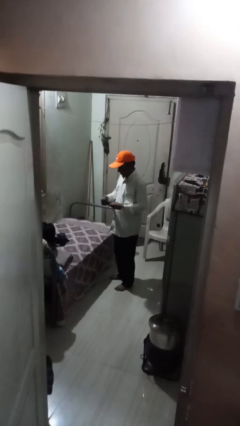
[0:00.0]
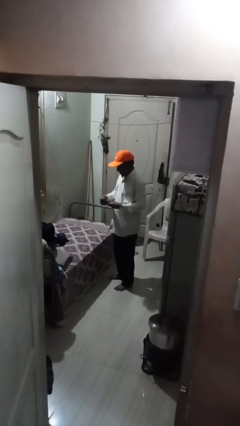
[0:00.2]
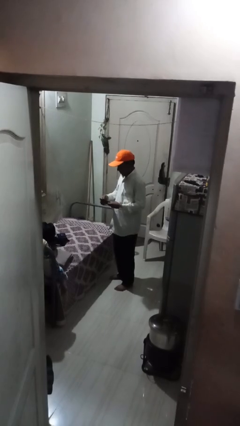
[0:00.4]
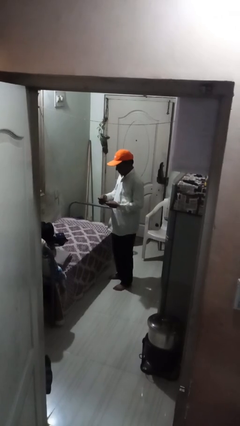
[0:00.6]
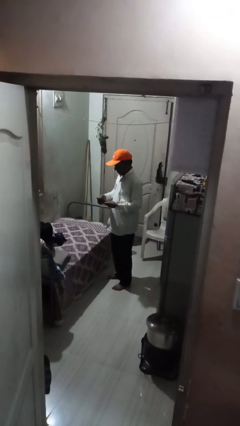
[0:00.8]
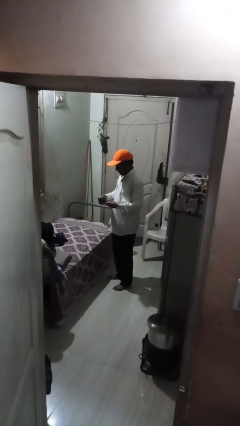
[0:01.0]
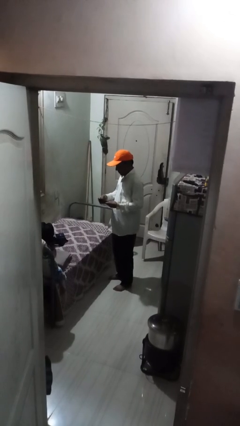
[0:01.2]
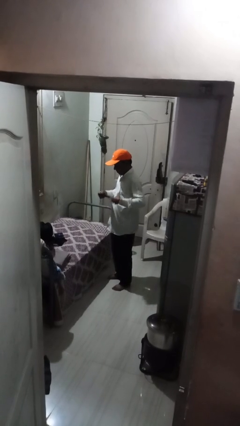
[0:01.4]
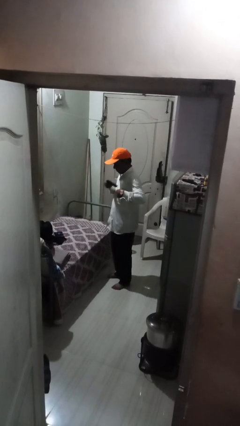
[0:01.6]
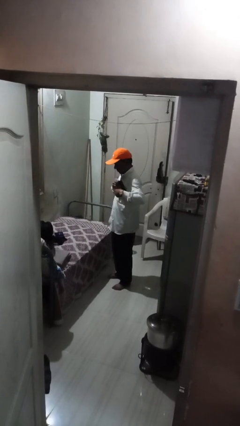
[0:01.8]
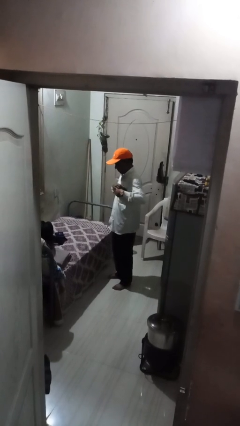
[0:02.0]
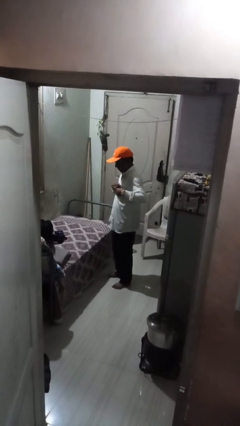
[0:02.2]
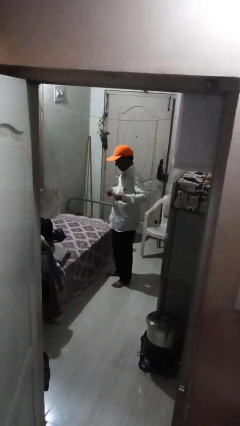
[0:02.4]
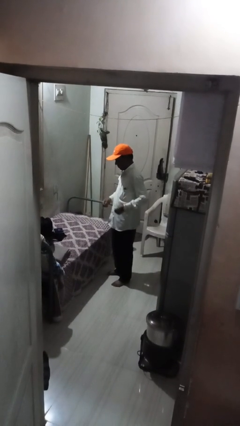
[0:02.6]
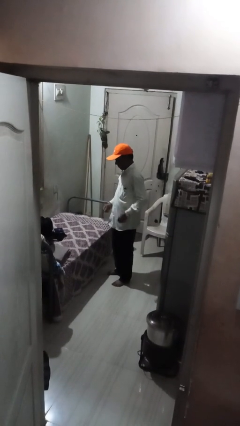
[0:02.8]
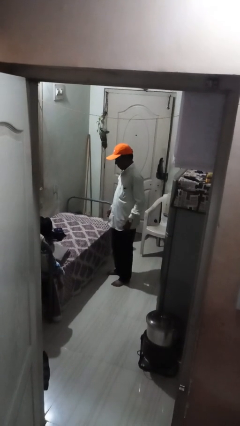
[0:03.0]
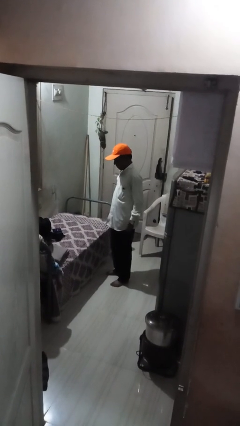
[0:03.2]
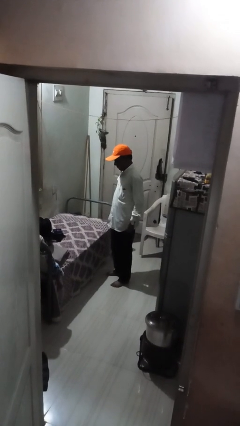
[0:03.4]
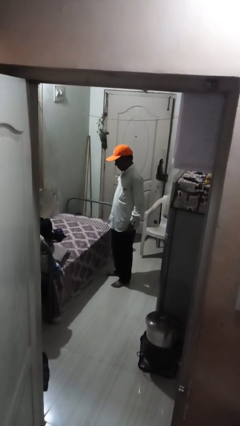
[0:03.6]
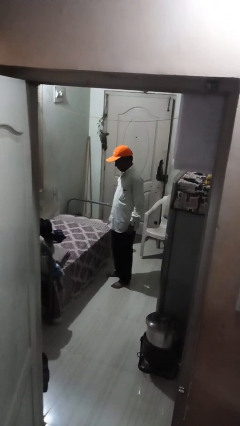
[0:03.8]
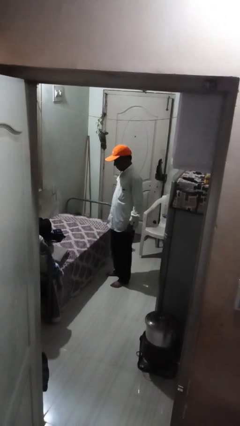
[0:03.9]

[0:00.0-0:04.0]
person puts phone into pocket

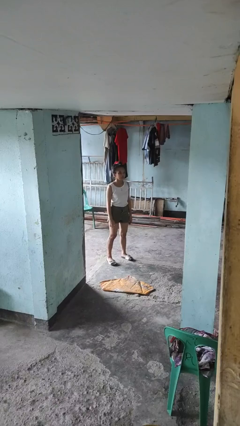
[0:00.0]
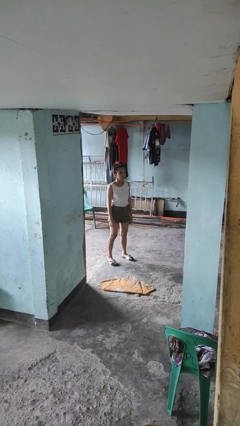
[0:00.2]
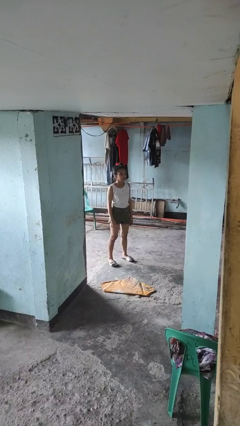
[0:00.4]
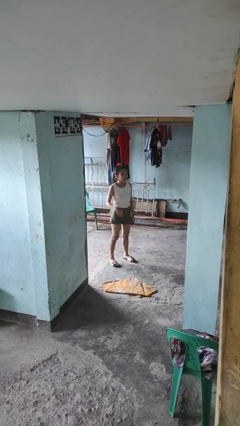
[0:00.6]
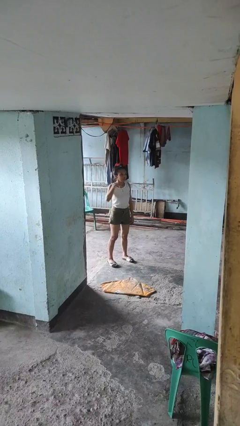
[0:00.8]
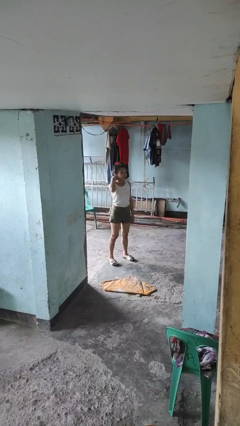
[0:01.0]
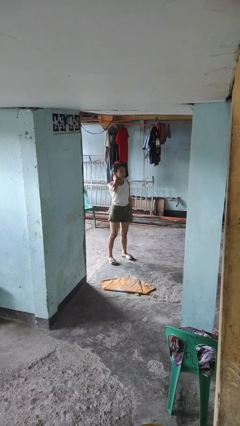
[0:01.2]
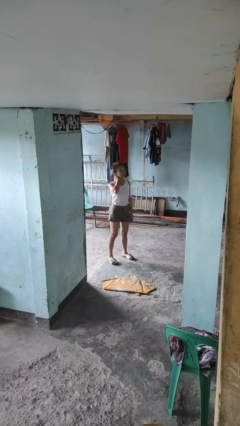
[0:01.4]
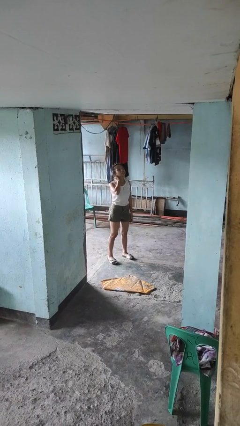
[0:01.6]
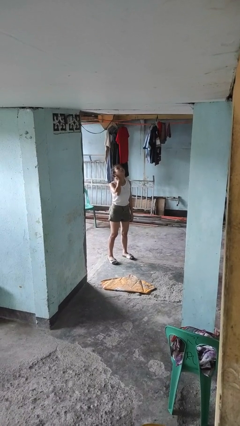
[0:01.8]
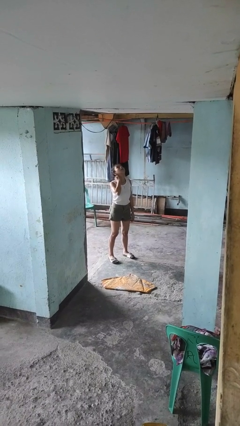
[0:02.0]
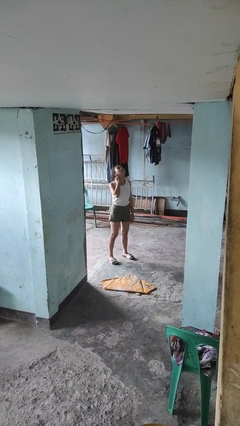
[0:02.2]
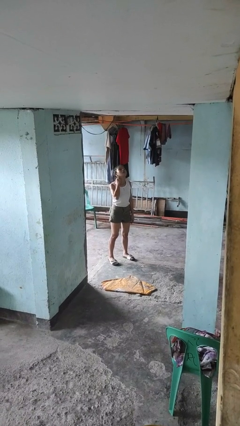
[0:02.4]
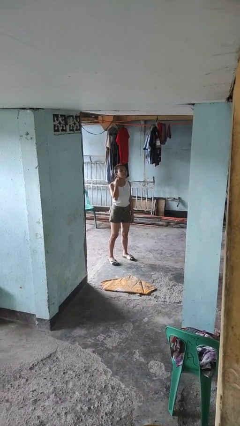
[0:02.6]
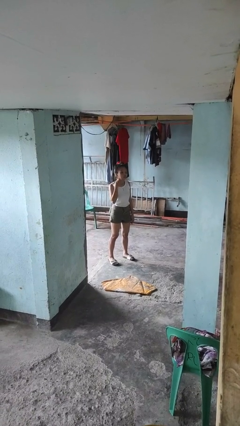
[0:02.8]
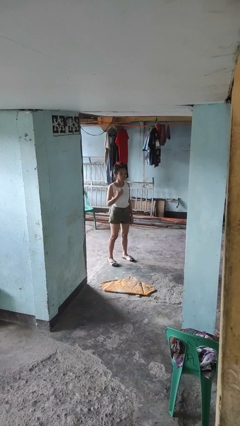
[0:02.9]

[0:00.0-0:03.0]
person rubs neck

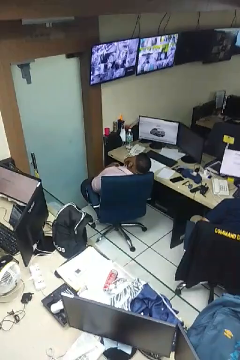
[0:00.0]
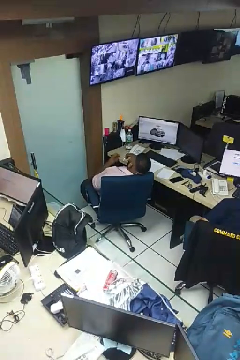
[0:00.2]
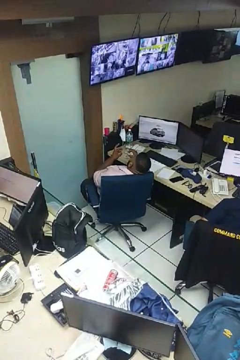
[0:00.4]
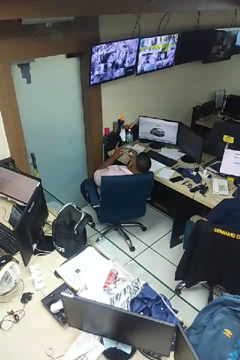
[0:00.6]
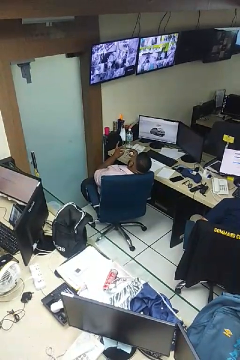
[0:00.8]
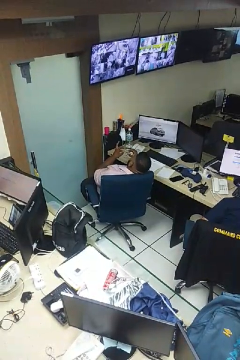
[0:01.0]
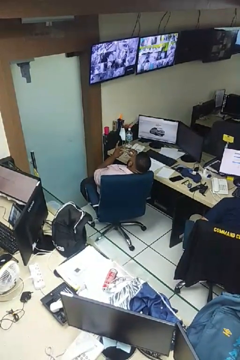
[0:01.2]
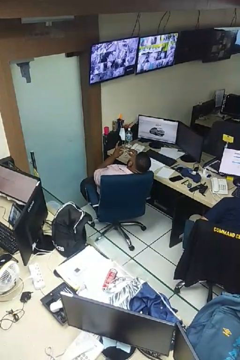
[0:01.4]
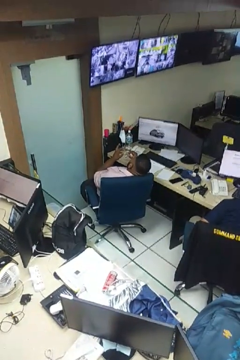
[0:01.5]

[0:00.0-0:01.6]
person clips fingernails

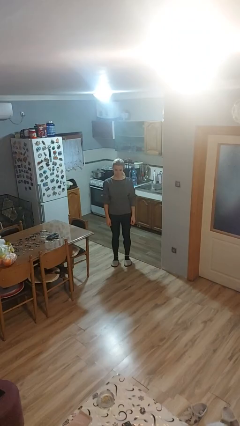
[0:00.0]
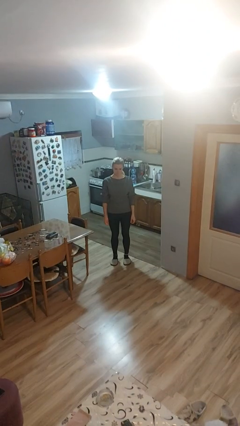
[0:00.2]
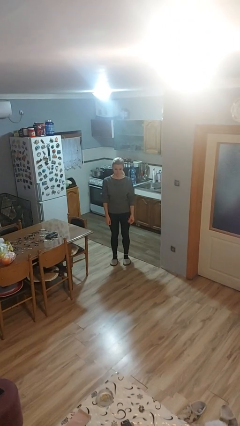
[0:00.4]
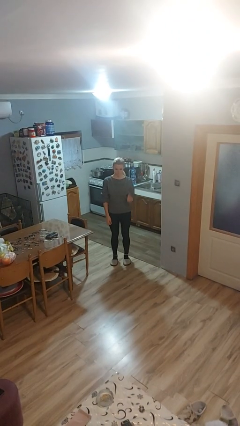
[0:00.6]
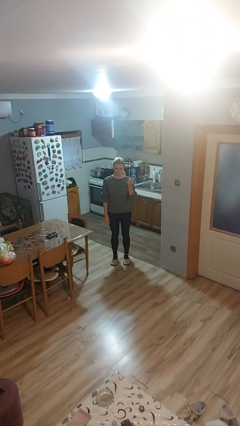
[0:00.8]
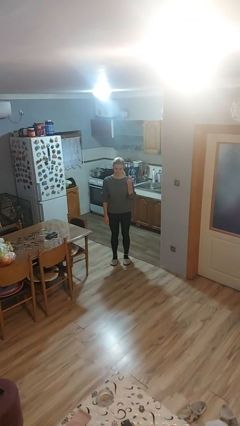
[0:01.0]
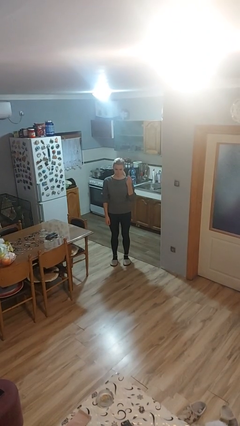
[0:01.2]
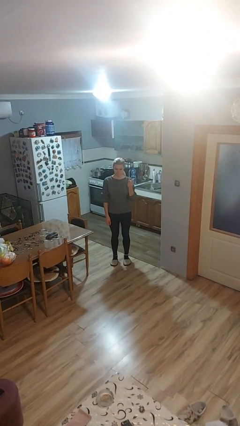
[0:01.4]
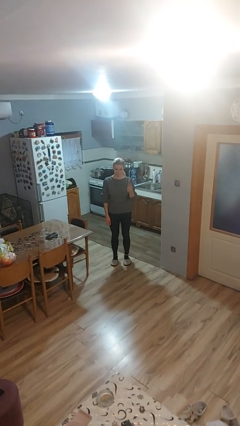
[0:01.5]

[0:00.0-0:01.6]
person snaps fingers

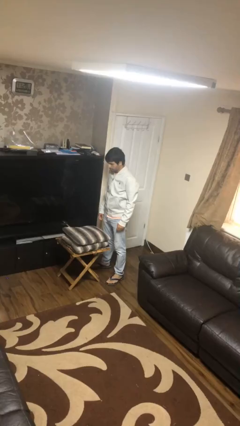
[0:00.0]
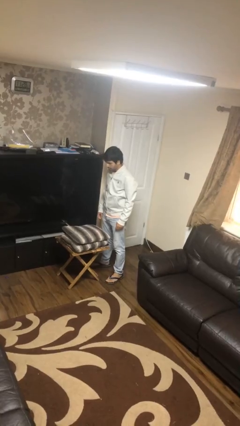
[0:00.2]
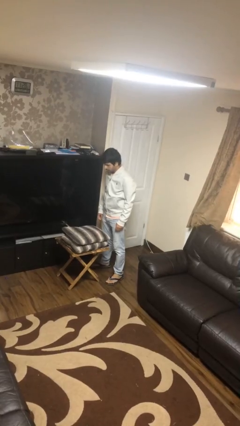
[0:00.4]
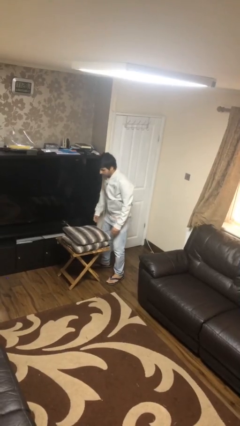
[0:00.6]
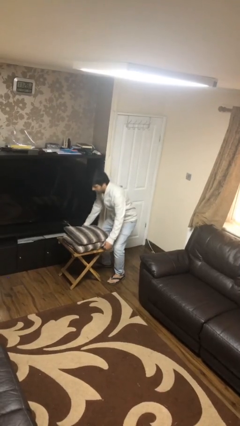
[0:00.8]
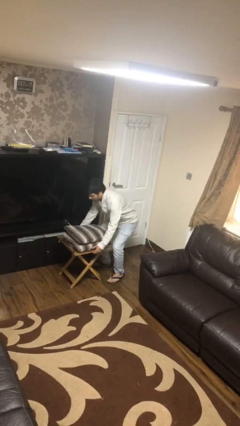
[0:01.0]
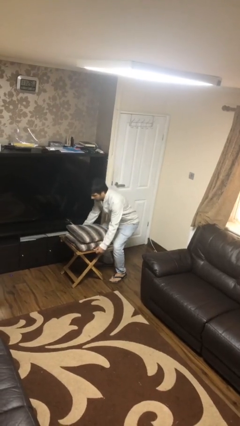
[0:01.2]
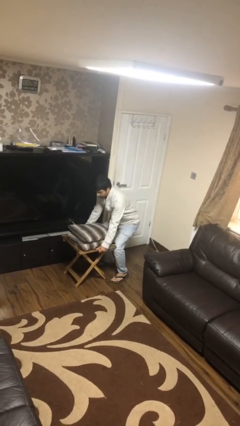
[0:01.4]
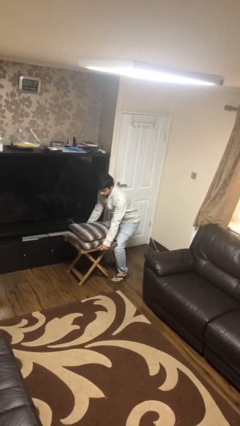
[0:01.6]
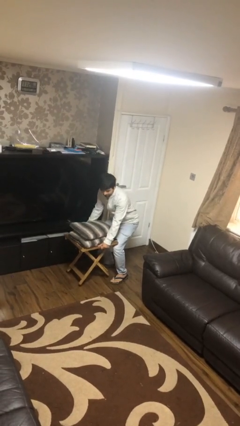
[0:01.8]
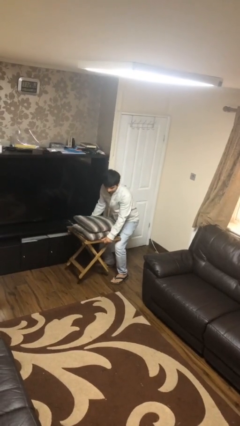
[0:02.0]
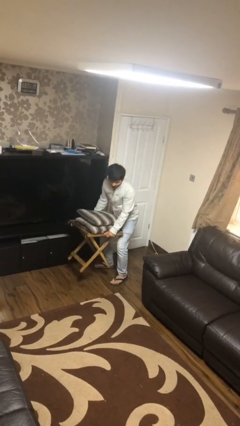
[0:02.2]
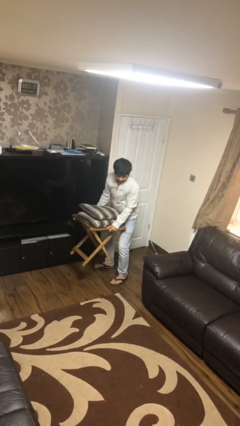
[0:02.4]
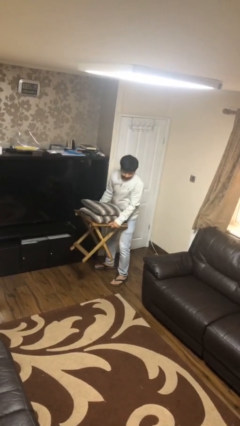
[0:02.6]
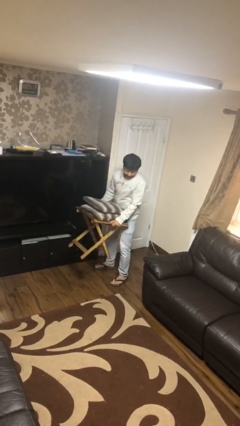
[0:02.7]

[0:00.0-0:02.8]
person picks up object from floor

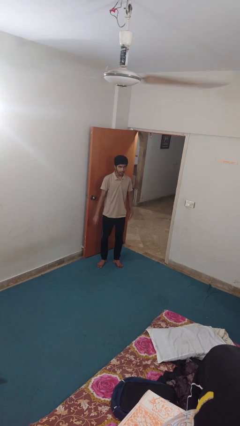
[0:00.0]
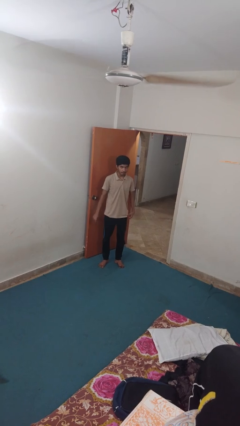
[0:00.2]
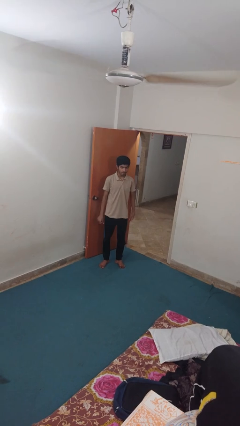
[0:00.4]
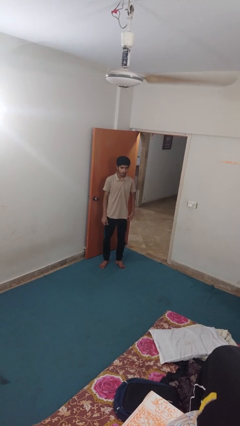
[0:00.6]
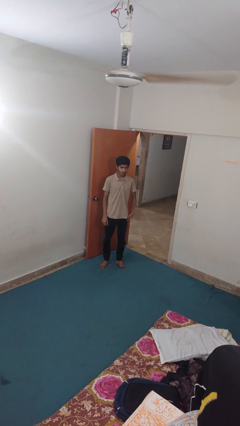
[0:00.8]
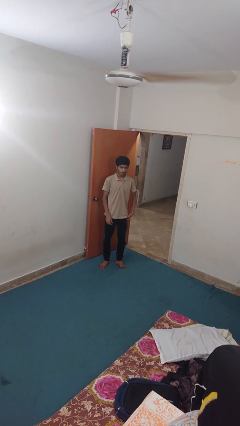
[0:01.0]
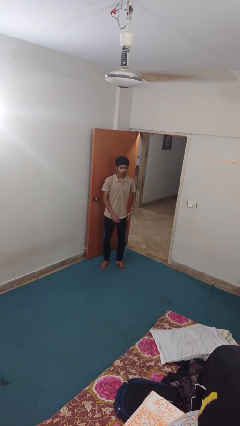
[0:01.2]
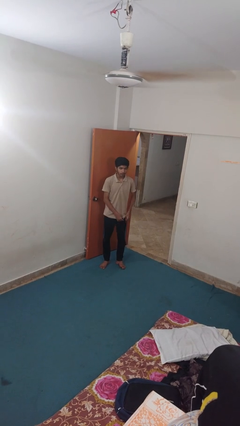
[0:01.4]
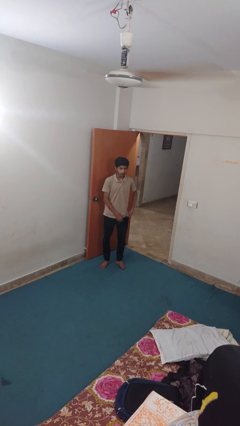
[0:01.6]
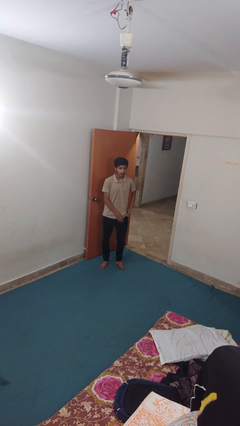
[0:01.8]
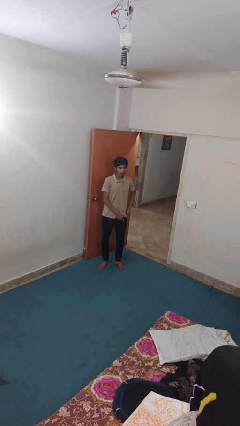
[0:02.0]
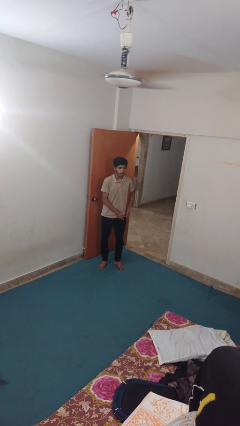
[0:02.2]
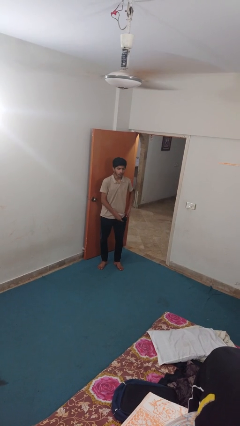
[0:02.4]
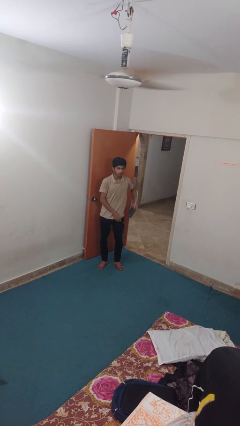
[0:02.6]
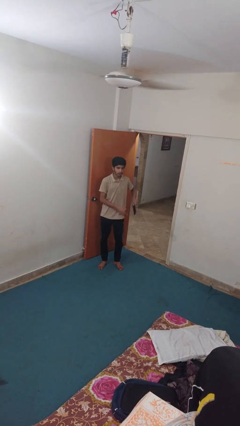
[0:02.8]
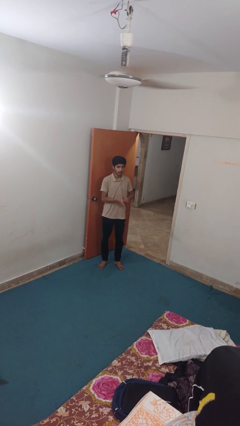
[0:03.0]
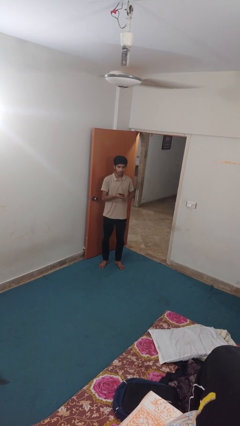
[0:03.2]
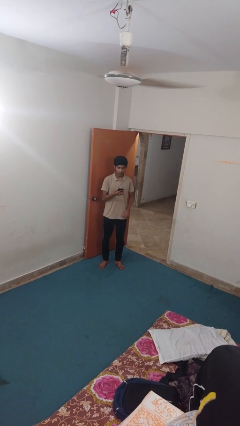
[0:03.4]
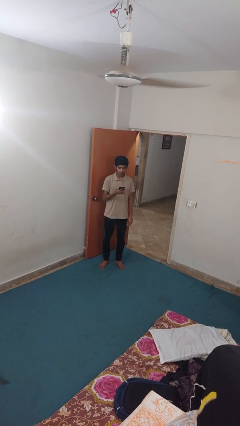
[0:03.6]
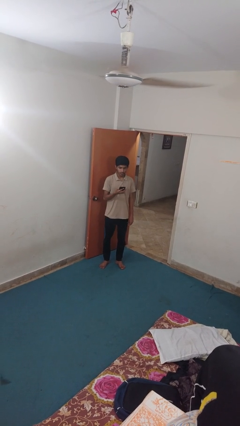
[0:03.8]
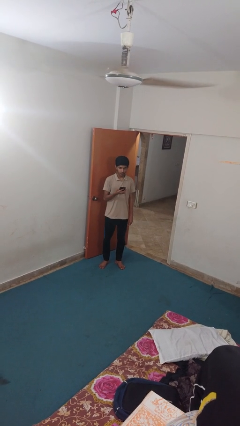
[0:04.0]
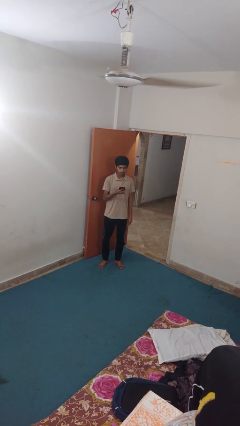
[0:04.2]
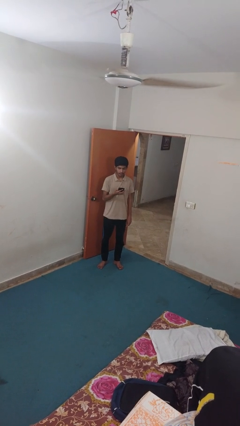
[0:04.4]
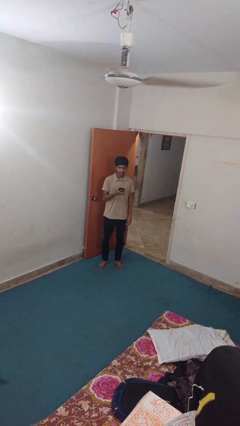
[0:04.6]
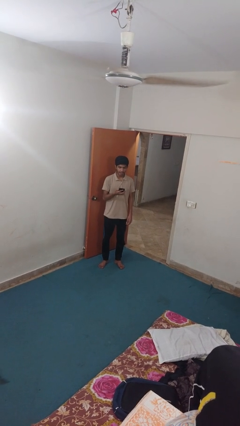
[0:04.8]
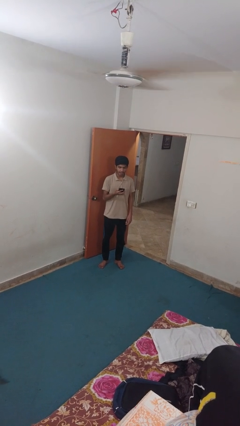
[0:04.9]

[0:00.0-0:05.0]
person takes phone from pocket
